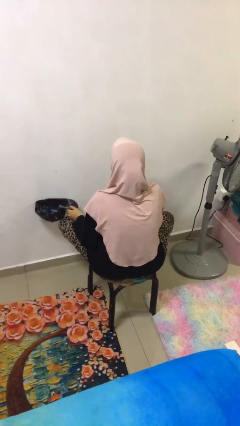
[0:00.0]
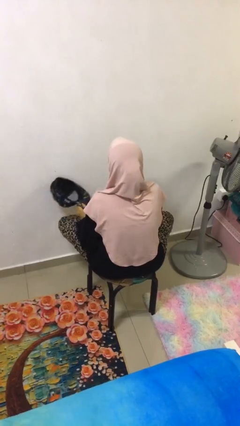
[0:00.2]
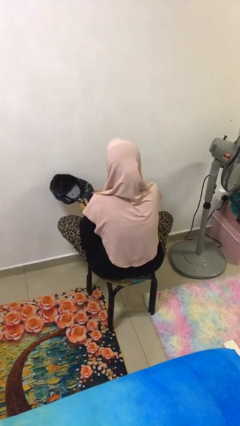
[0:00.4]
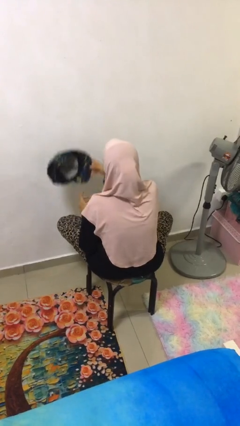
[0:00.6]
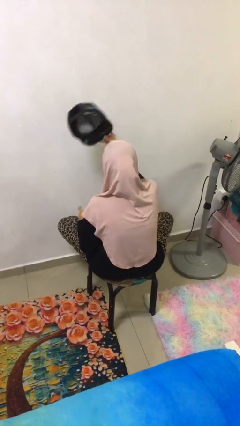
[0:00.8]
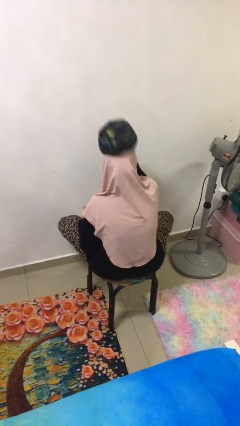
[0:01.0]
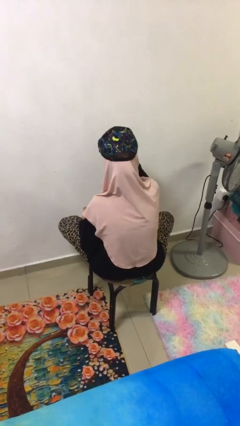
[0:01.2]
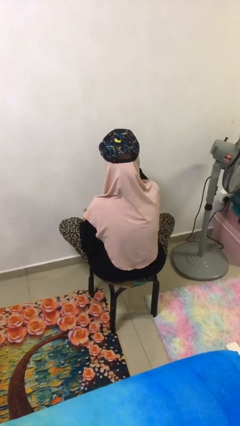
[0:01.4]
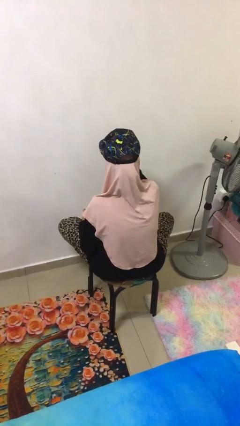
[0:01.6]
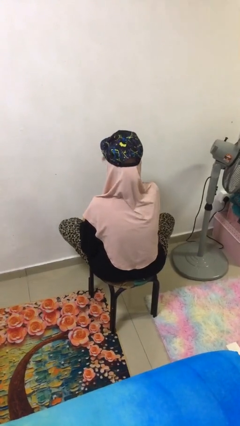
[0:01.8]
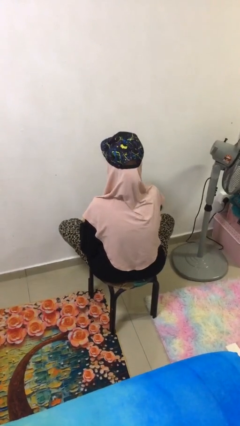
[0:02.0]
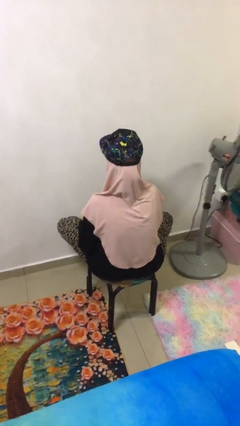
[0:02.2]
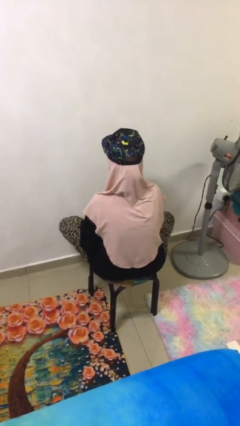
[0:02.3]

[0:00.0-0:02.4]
person puts on hat

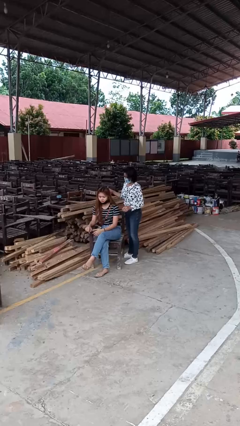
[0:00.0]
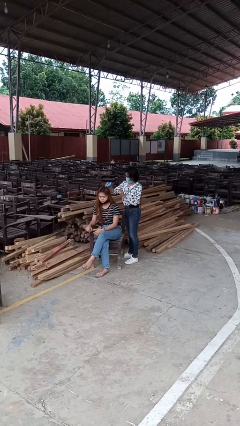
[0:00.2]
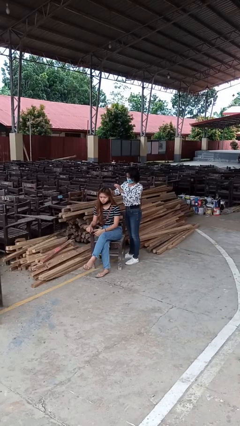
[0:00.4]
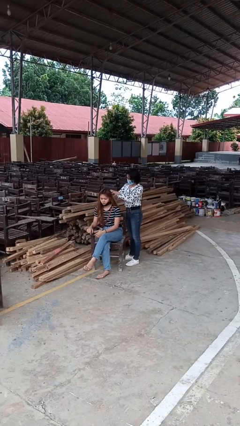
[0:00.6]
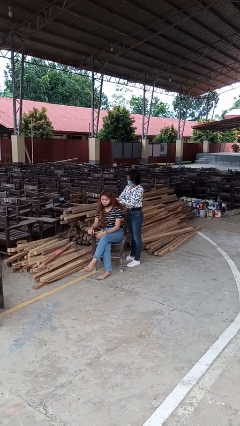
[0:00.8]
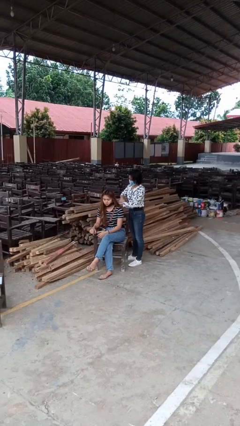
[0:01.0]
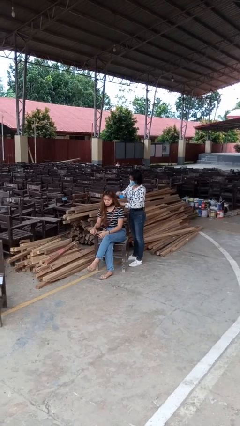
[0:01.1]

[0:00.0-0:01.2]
person brushes hair of person

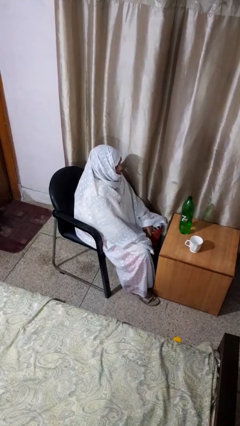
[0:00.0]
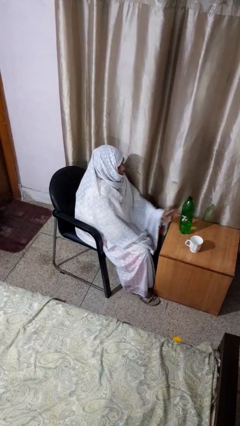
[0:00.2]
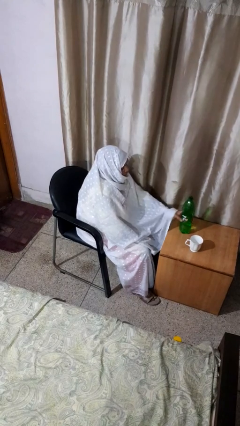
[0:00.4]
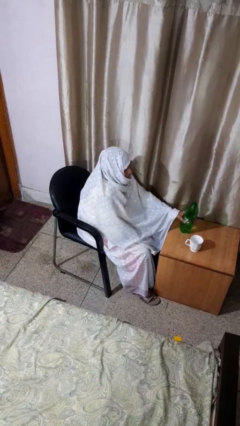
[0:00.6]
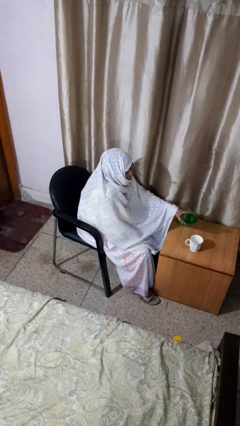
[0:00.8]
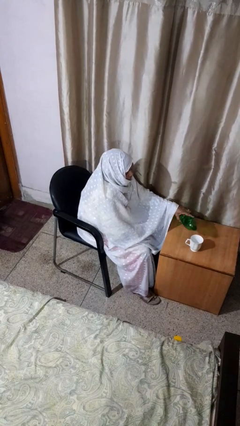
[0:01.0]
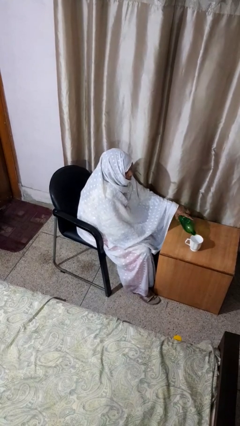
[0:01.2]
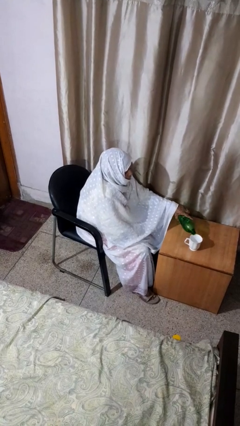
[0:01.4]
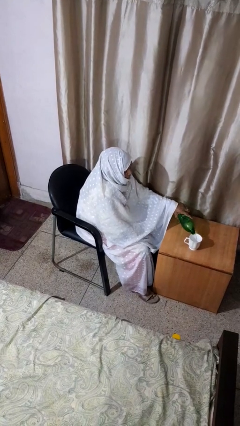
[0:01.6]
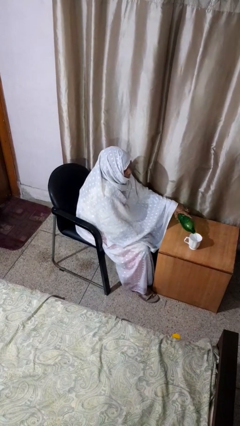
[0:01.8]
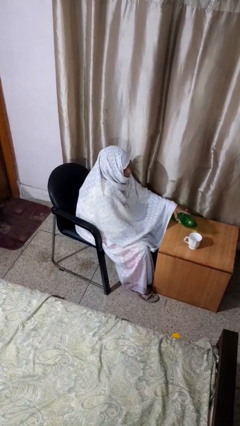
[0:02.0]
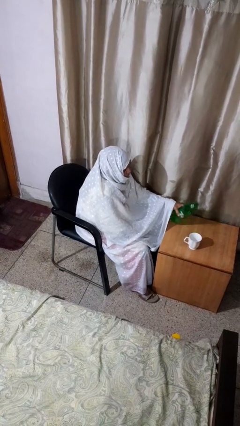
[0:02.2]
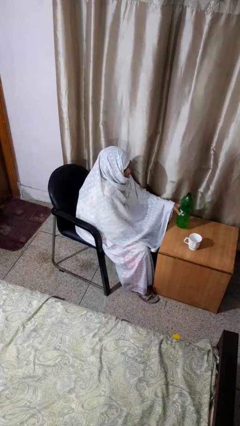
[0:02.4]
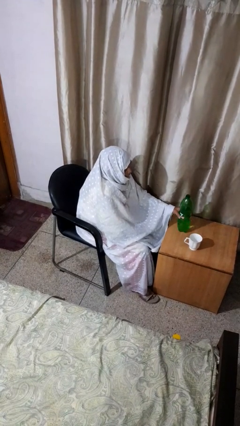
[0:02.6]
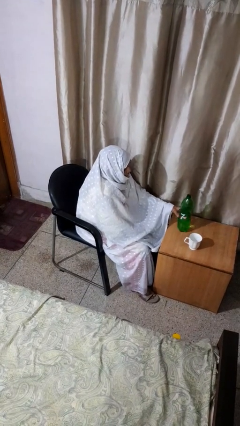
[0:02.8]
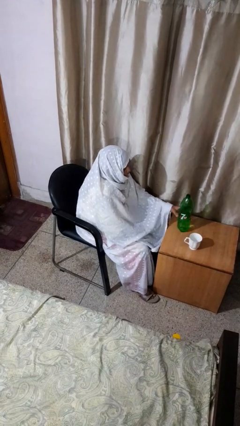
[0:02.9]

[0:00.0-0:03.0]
person pours liquid into cup

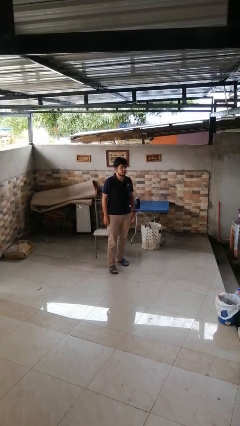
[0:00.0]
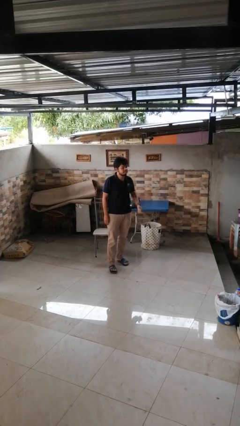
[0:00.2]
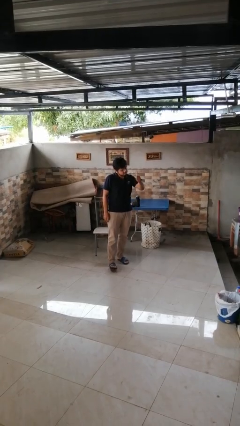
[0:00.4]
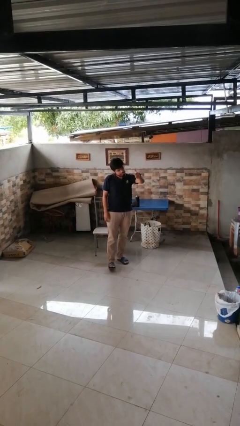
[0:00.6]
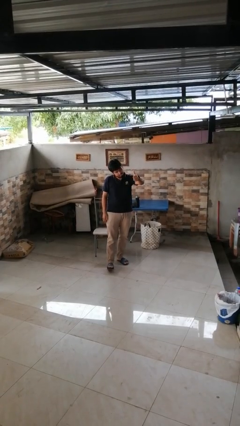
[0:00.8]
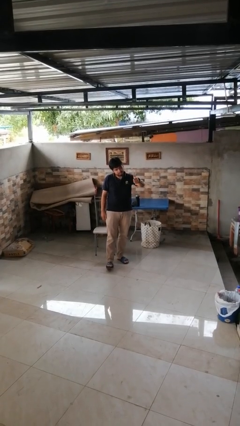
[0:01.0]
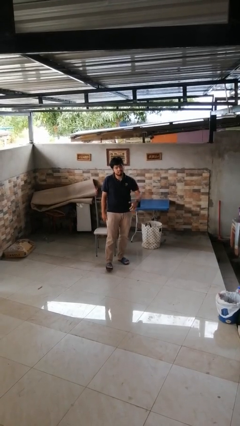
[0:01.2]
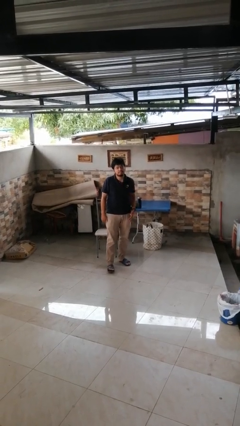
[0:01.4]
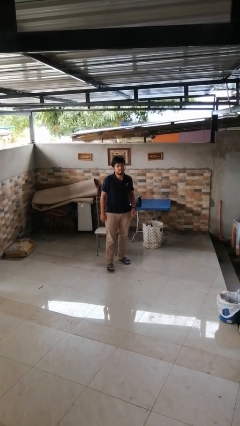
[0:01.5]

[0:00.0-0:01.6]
person gestures thumbs up

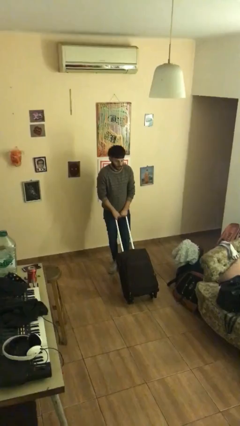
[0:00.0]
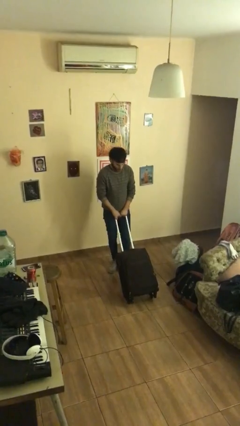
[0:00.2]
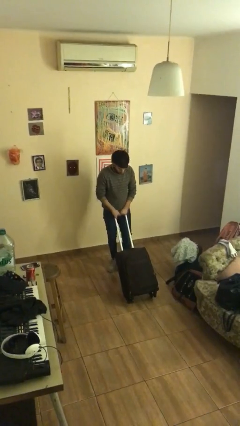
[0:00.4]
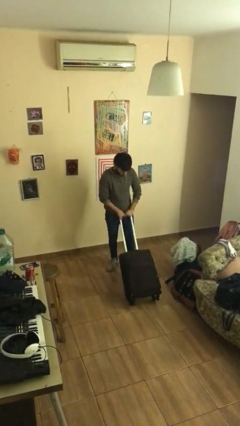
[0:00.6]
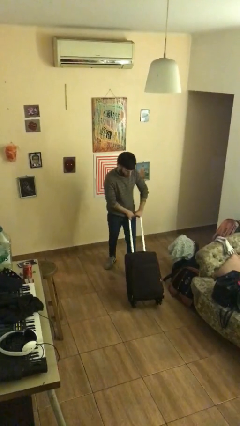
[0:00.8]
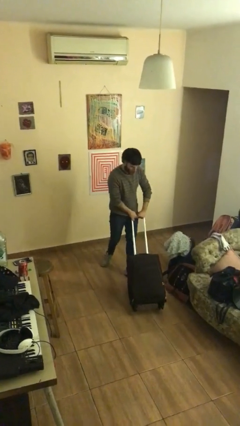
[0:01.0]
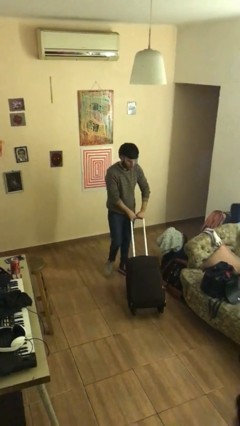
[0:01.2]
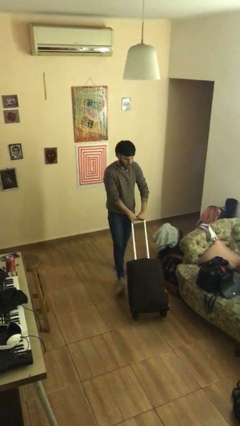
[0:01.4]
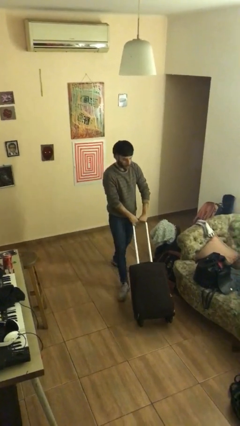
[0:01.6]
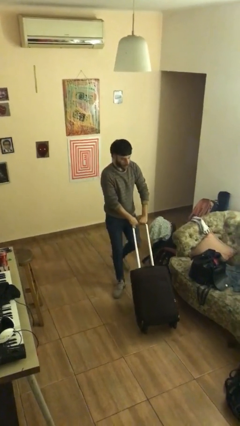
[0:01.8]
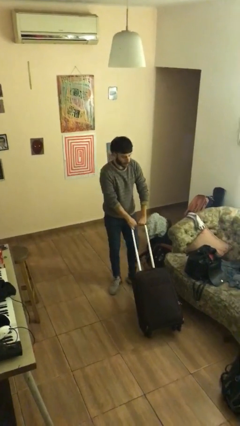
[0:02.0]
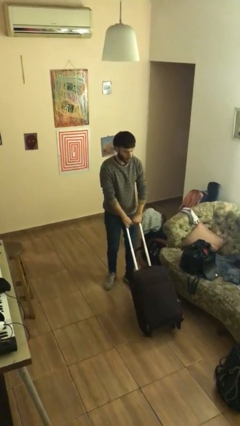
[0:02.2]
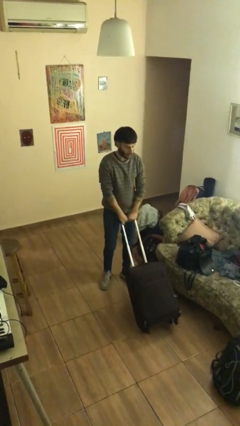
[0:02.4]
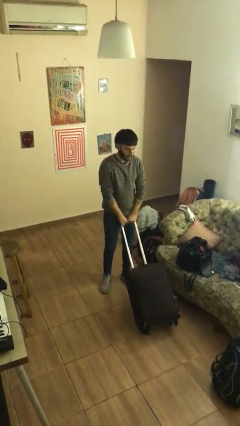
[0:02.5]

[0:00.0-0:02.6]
person pushes wheeled cart

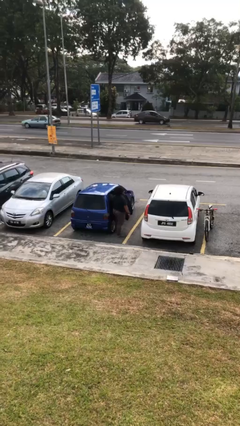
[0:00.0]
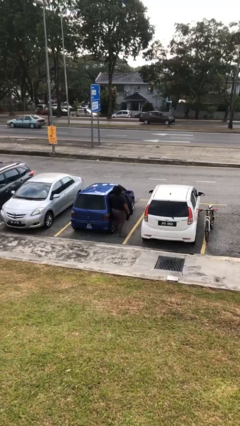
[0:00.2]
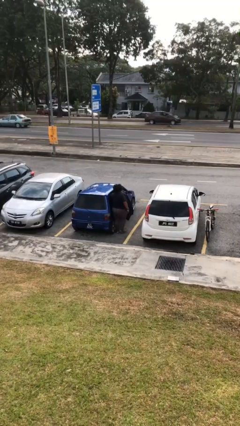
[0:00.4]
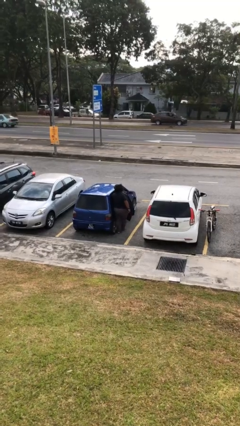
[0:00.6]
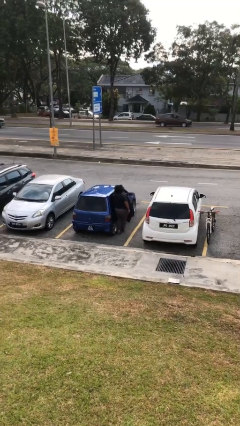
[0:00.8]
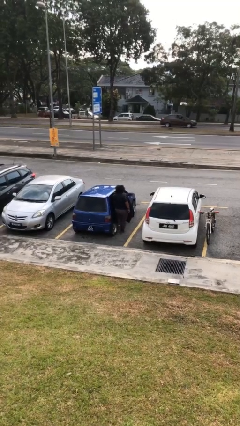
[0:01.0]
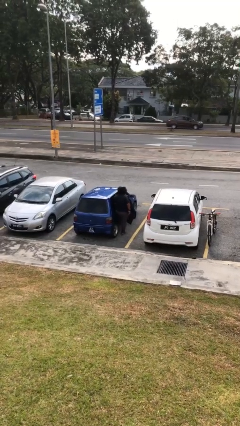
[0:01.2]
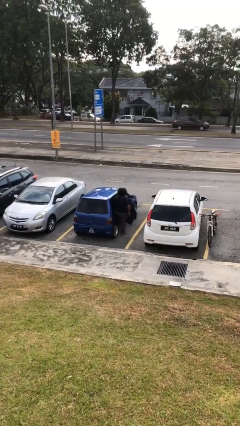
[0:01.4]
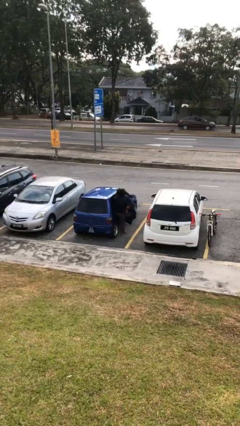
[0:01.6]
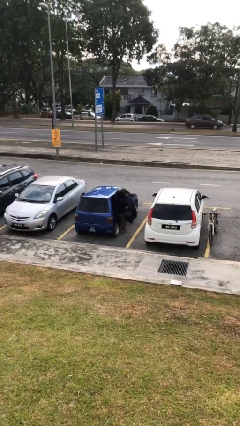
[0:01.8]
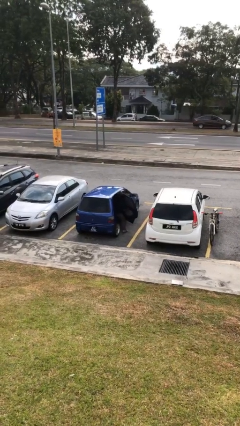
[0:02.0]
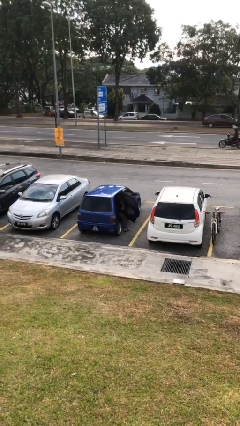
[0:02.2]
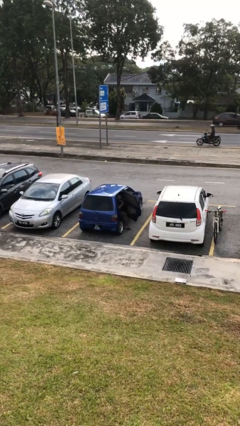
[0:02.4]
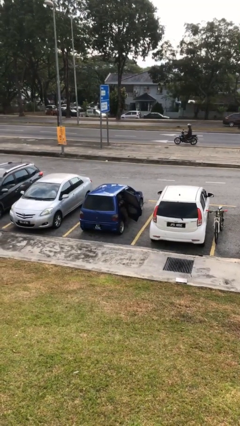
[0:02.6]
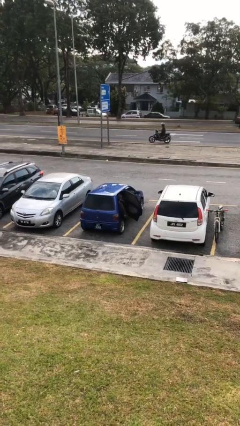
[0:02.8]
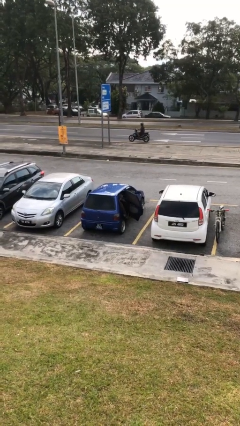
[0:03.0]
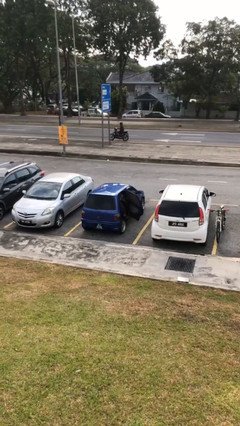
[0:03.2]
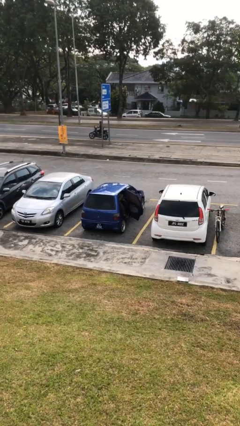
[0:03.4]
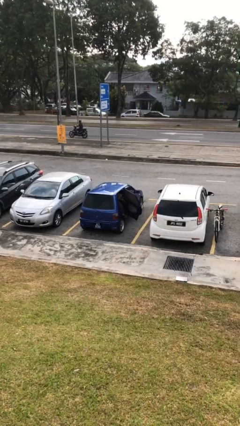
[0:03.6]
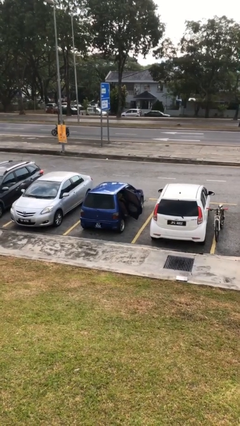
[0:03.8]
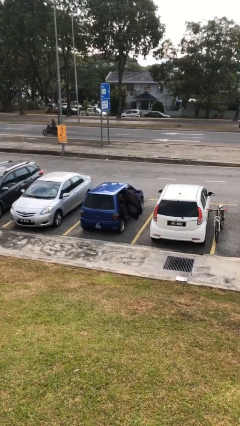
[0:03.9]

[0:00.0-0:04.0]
person enters car

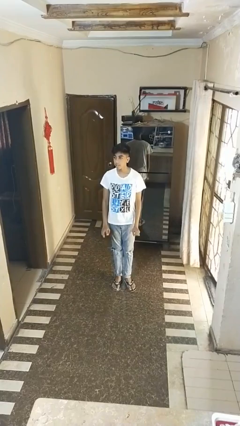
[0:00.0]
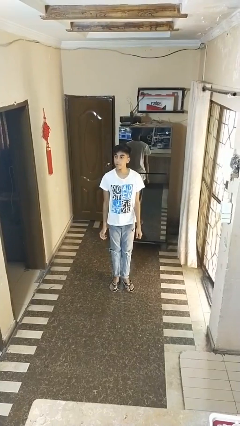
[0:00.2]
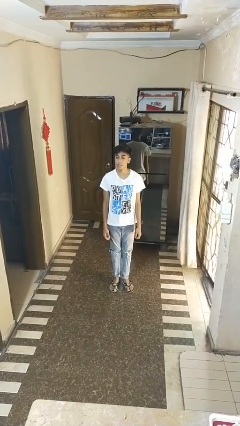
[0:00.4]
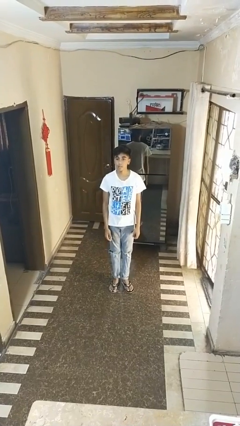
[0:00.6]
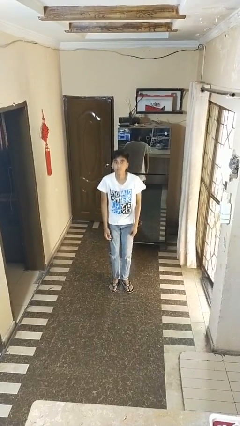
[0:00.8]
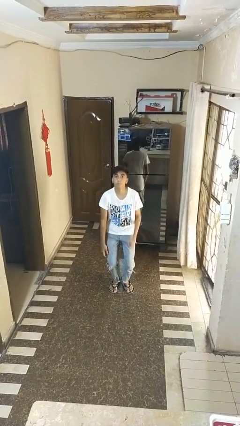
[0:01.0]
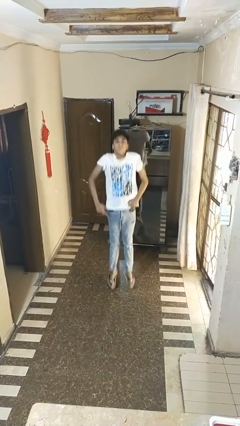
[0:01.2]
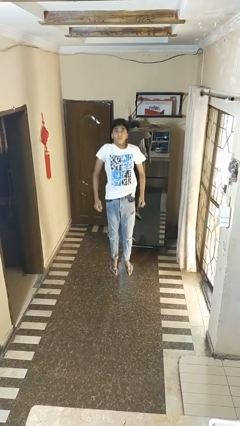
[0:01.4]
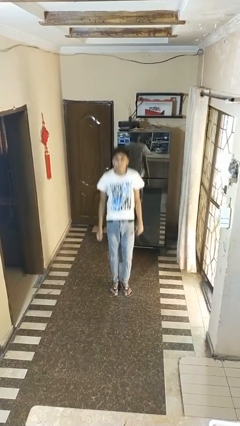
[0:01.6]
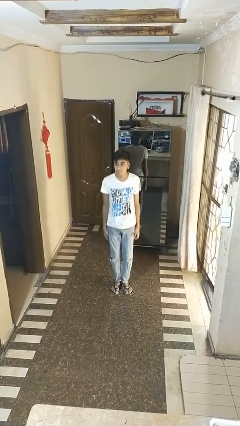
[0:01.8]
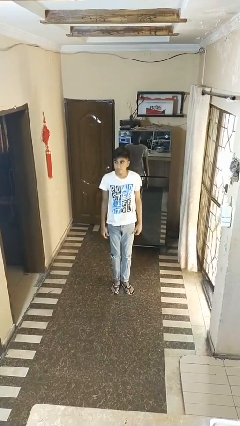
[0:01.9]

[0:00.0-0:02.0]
person jumps
